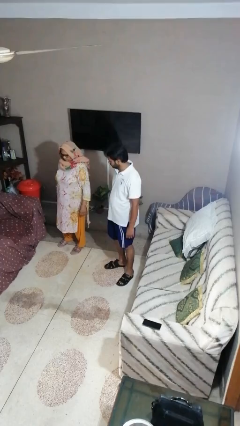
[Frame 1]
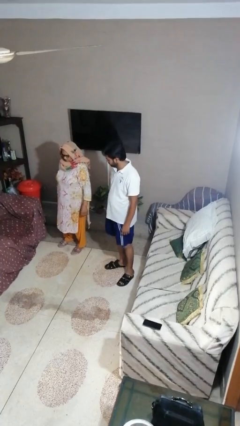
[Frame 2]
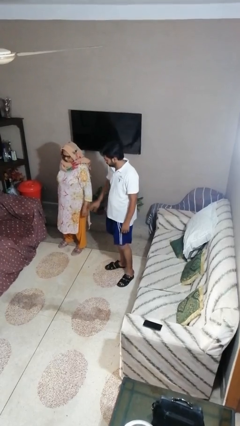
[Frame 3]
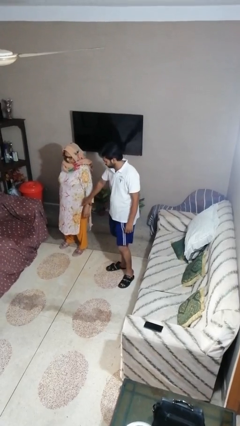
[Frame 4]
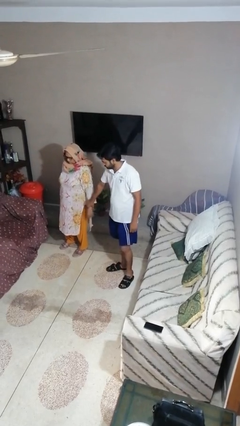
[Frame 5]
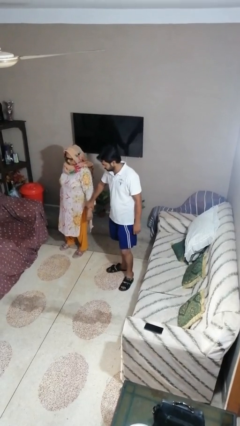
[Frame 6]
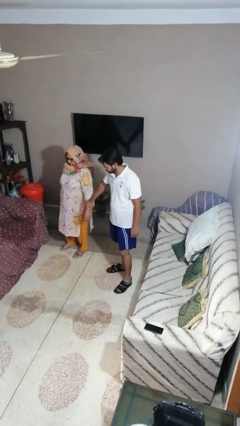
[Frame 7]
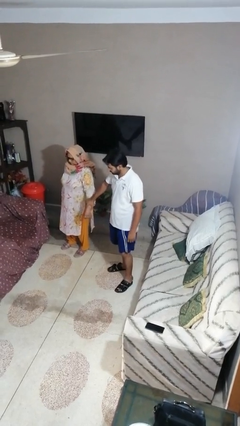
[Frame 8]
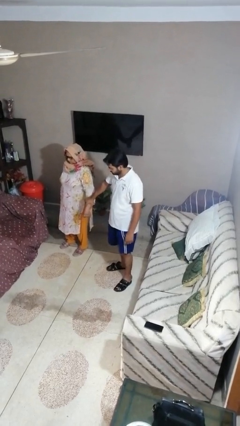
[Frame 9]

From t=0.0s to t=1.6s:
person grabs person by forearm

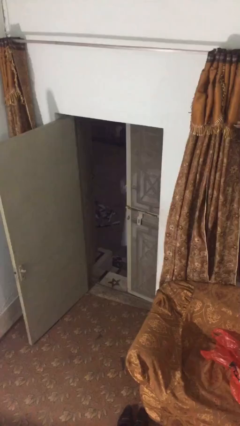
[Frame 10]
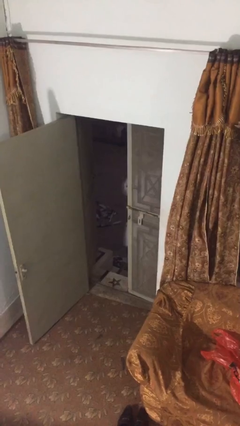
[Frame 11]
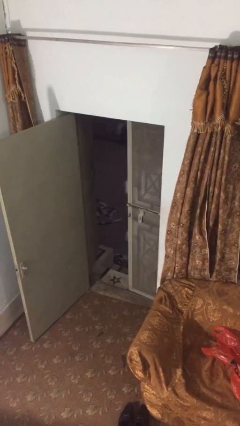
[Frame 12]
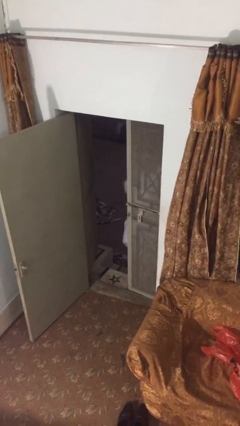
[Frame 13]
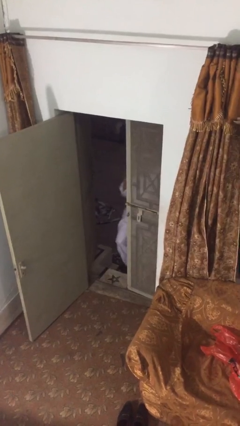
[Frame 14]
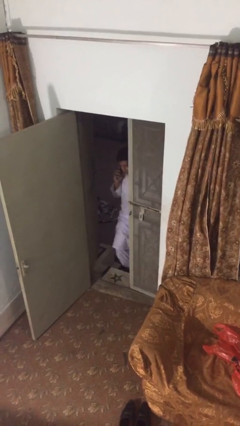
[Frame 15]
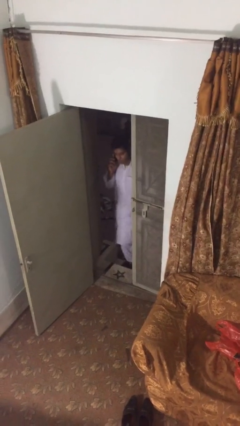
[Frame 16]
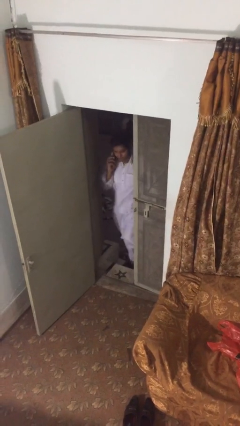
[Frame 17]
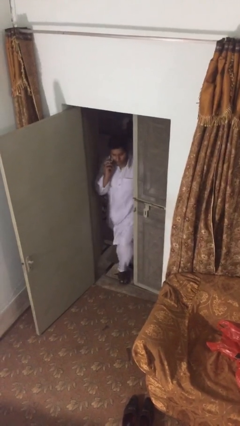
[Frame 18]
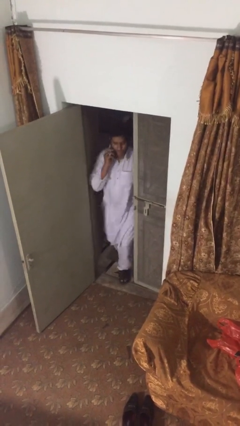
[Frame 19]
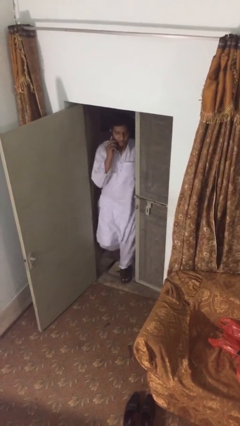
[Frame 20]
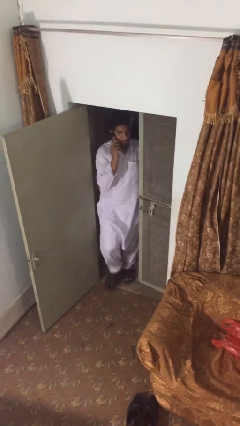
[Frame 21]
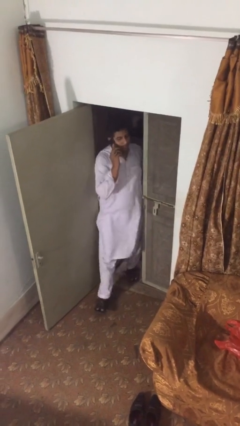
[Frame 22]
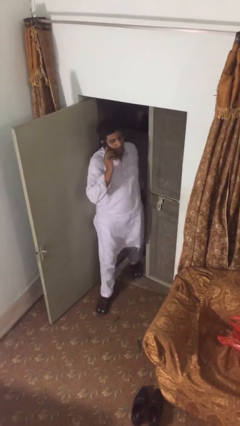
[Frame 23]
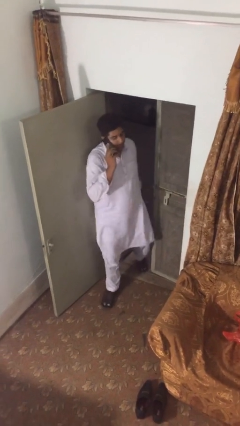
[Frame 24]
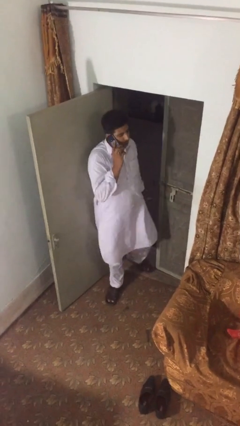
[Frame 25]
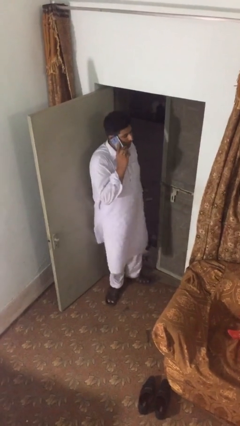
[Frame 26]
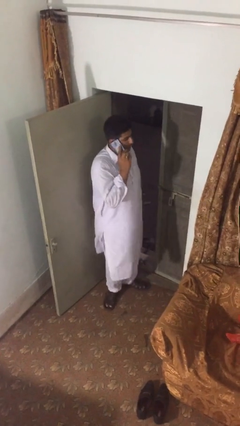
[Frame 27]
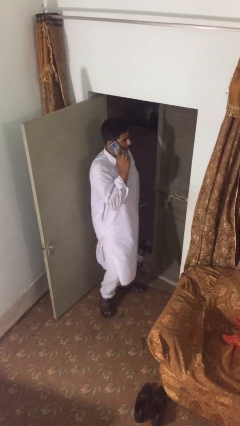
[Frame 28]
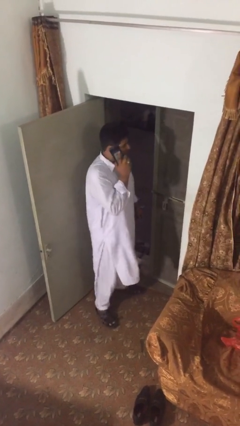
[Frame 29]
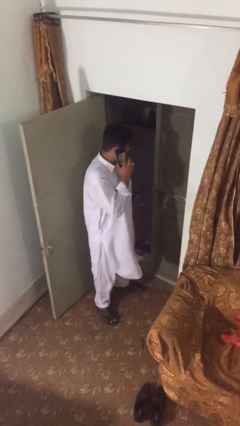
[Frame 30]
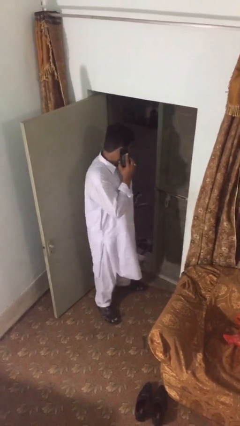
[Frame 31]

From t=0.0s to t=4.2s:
person enters scene through structure

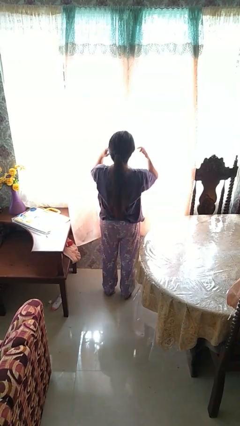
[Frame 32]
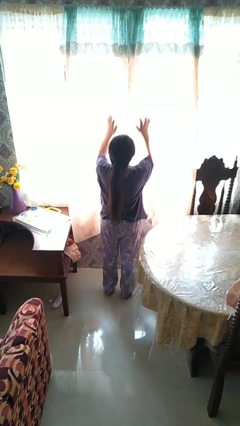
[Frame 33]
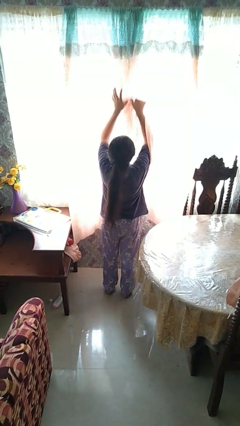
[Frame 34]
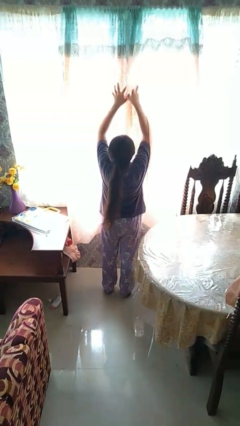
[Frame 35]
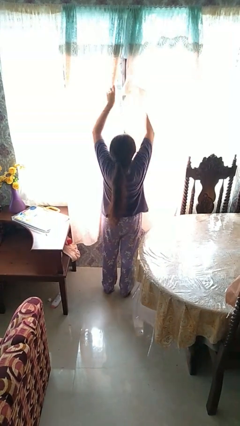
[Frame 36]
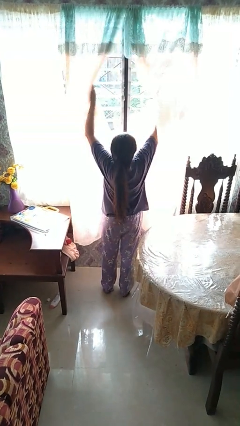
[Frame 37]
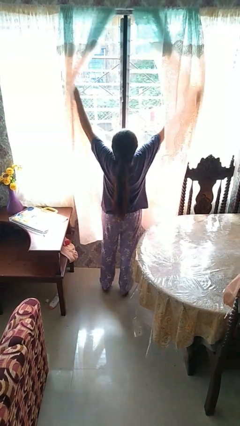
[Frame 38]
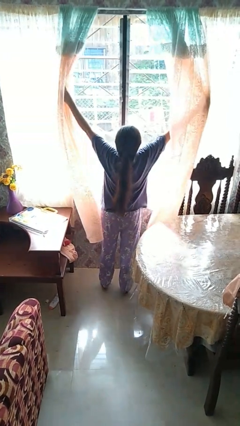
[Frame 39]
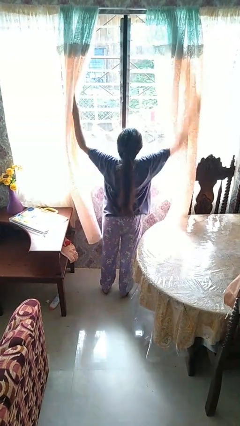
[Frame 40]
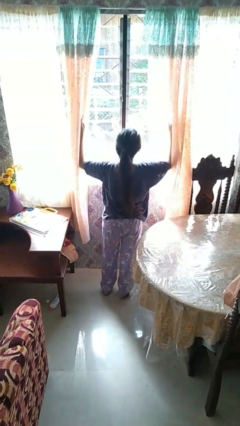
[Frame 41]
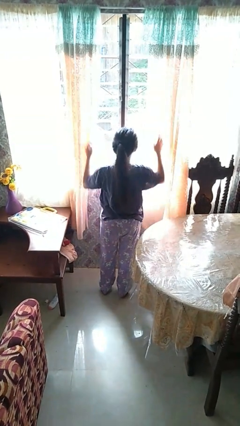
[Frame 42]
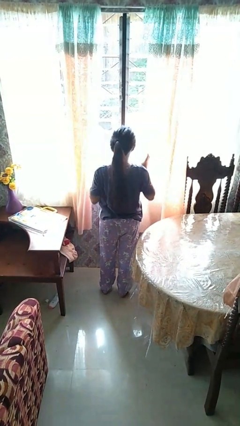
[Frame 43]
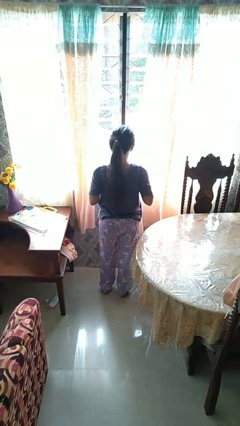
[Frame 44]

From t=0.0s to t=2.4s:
person opens curtains

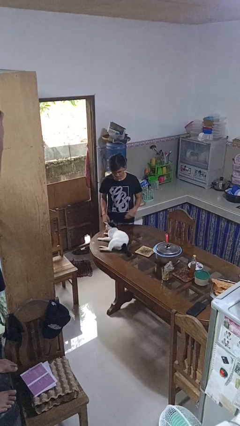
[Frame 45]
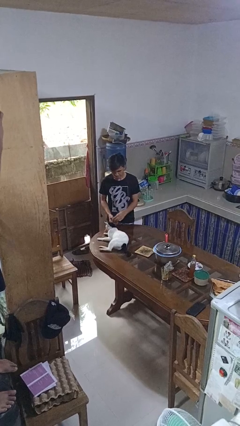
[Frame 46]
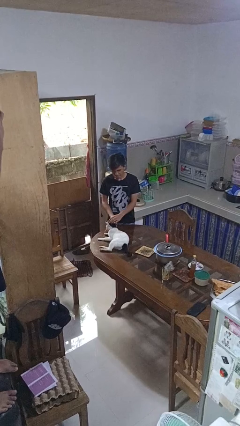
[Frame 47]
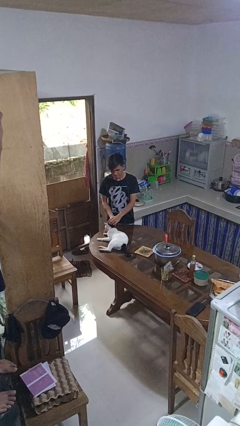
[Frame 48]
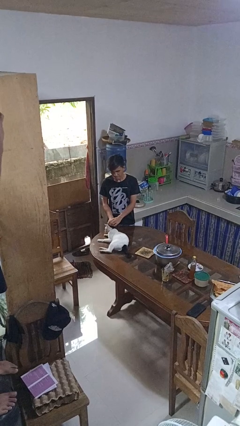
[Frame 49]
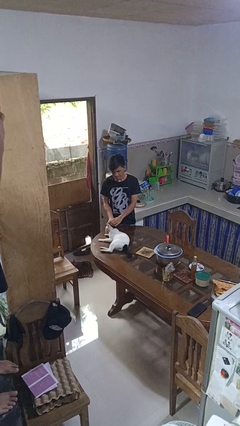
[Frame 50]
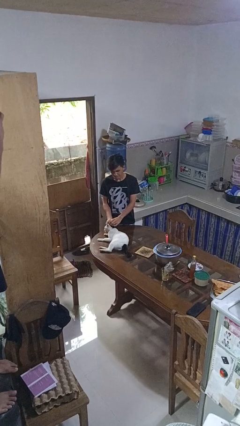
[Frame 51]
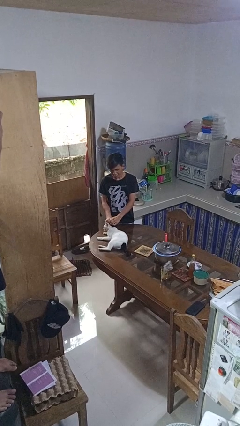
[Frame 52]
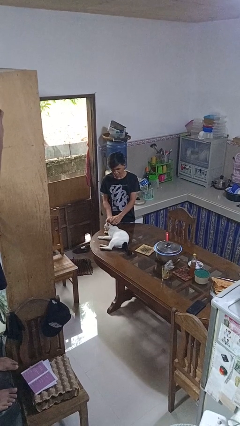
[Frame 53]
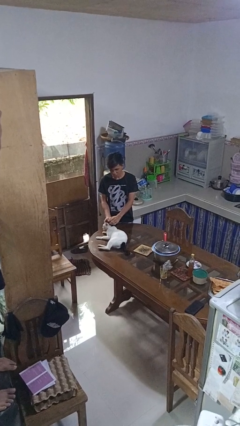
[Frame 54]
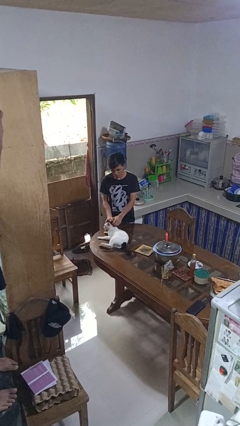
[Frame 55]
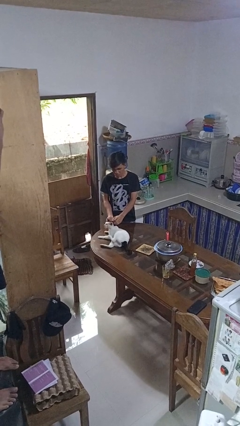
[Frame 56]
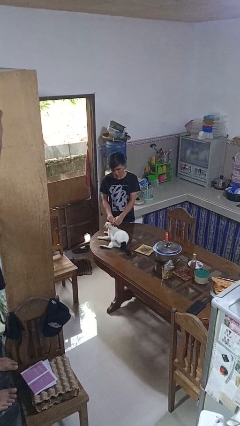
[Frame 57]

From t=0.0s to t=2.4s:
person pets cat

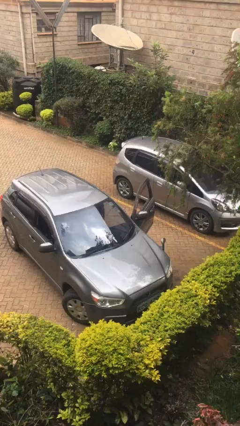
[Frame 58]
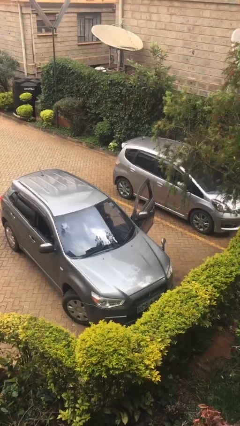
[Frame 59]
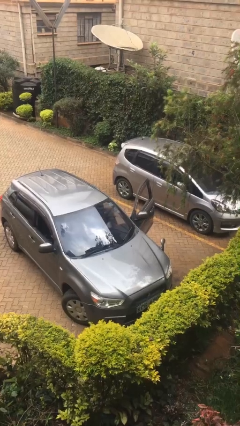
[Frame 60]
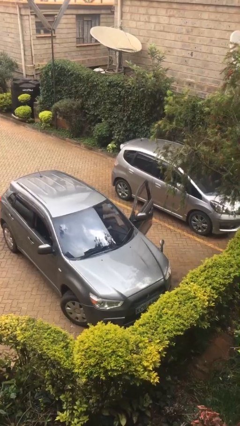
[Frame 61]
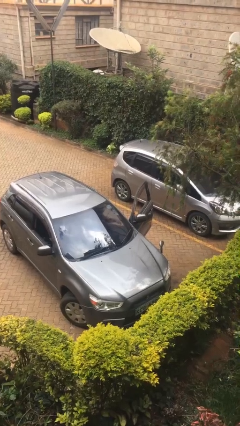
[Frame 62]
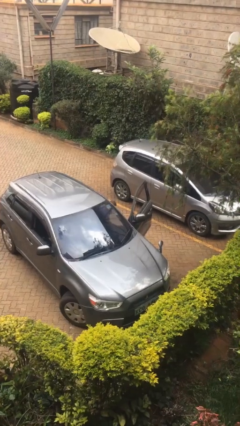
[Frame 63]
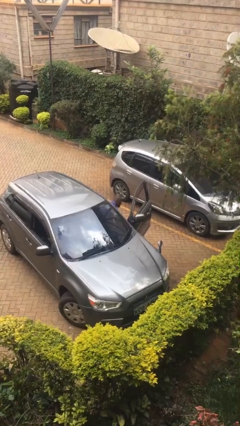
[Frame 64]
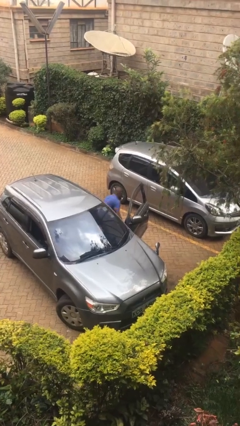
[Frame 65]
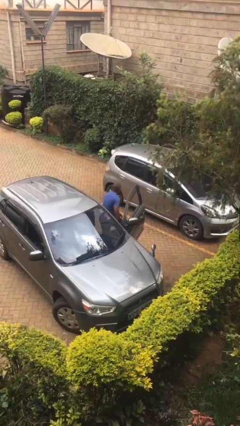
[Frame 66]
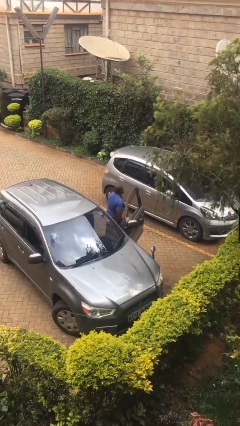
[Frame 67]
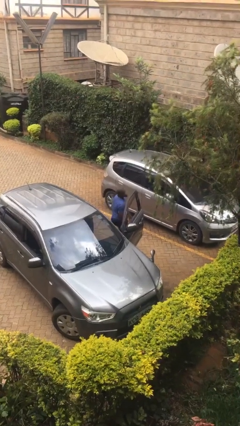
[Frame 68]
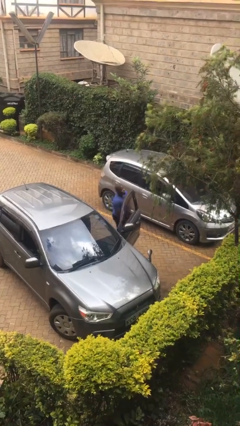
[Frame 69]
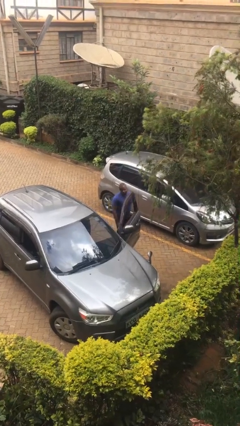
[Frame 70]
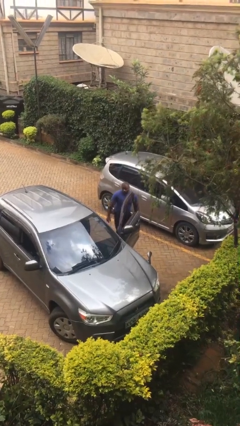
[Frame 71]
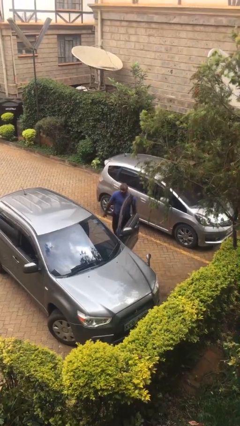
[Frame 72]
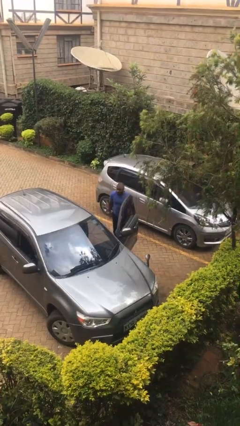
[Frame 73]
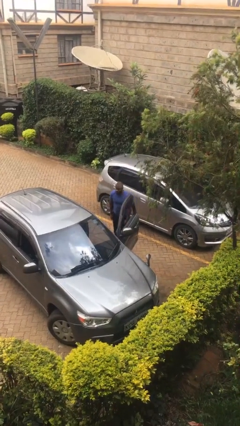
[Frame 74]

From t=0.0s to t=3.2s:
person exits car

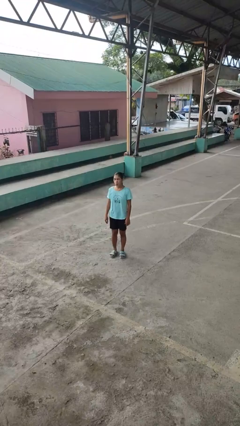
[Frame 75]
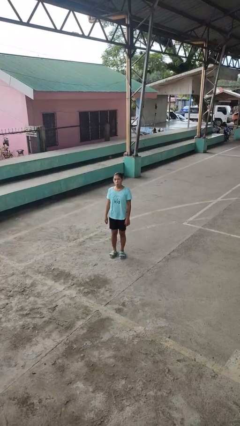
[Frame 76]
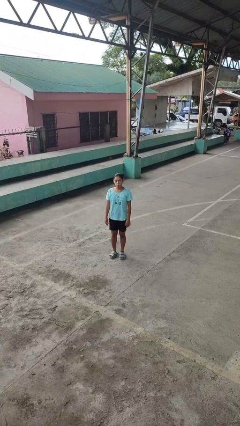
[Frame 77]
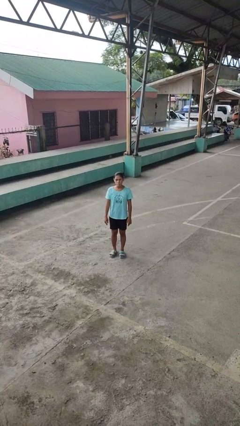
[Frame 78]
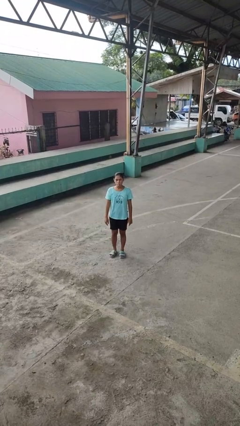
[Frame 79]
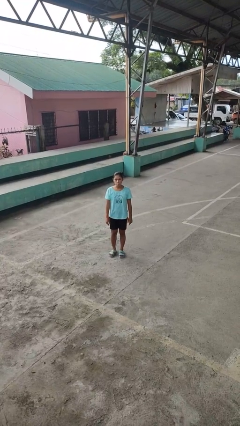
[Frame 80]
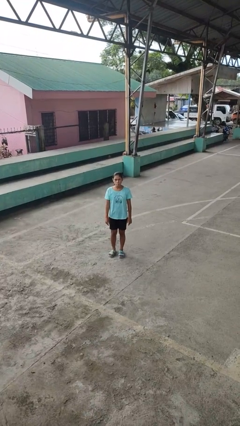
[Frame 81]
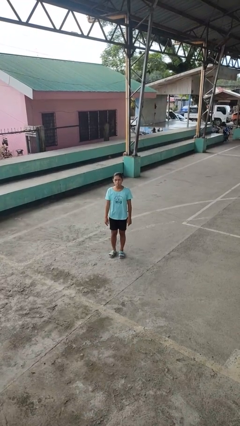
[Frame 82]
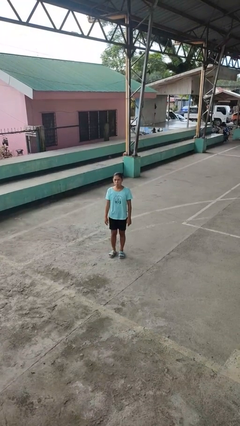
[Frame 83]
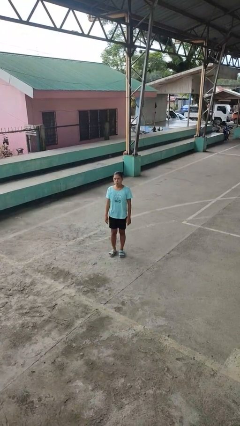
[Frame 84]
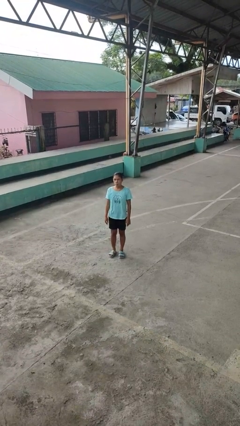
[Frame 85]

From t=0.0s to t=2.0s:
person sticks out tongue

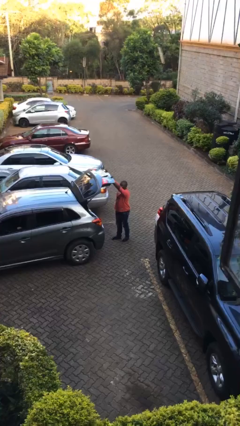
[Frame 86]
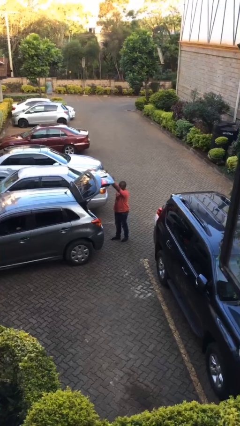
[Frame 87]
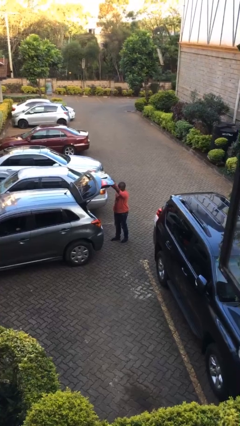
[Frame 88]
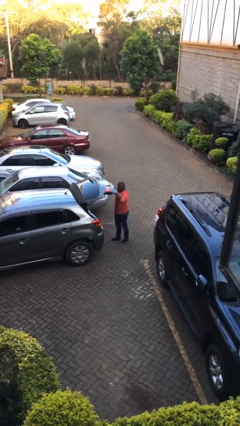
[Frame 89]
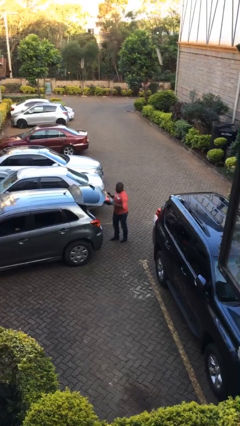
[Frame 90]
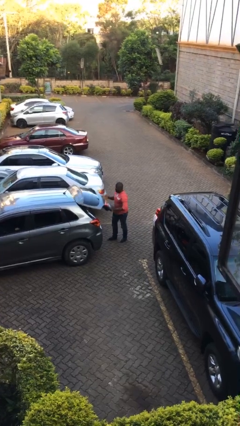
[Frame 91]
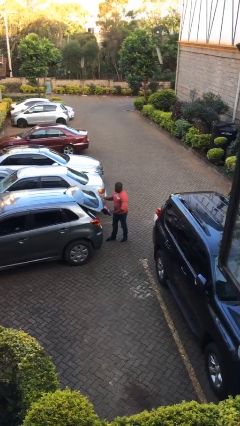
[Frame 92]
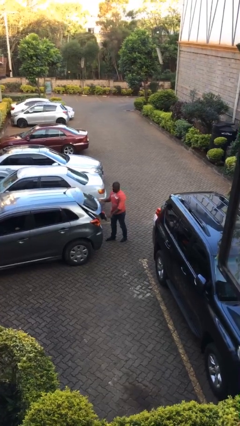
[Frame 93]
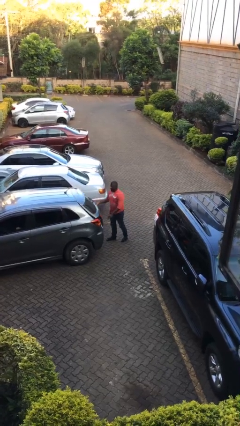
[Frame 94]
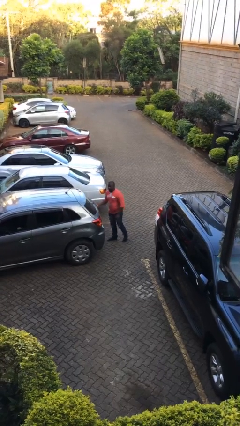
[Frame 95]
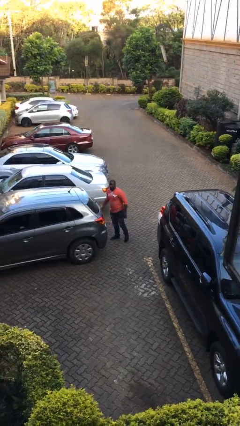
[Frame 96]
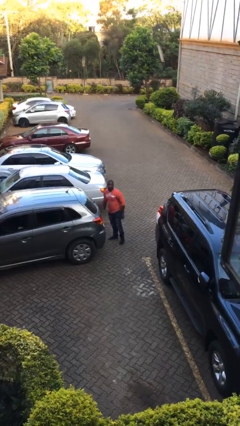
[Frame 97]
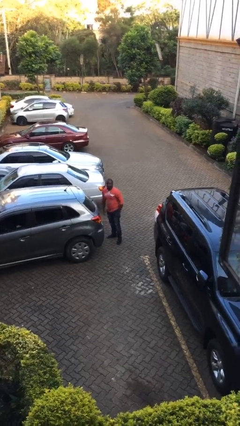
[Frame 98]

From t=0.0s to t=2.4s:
person closes car trunk
